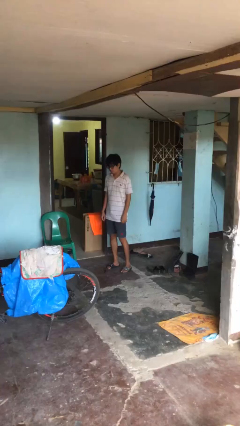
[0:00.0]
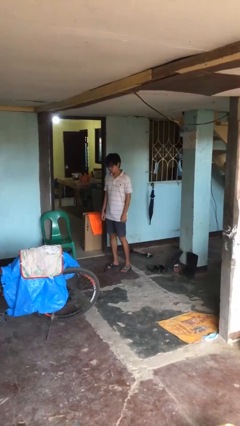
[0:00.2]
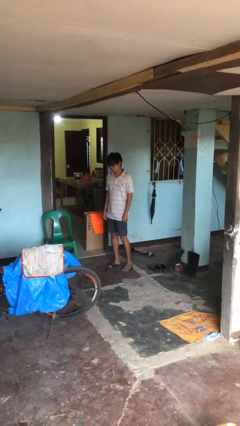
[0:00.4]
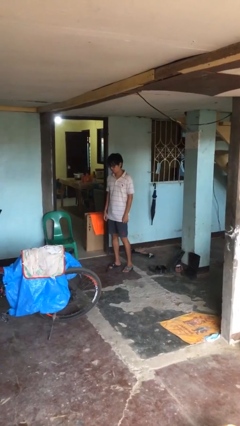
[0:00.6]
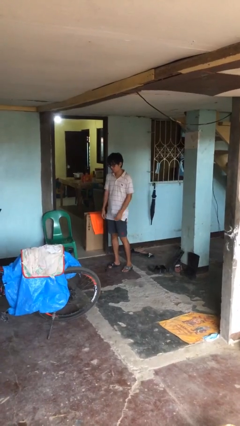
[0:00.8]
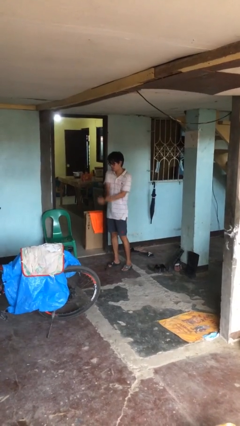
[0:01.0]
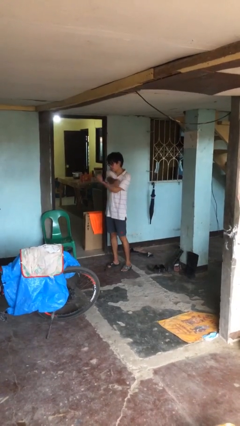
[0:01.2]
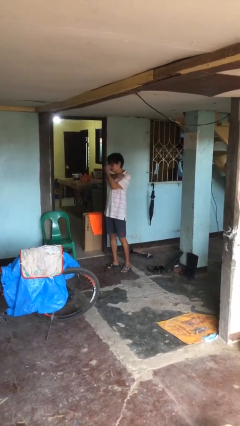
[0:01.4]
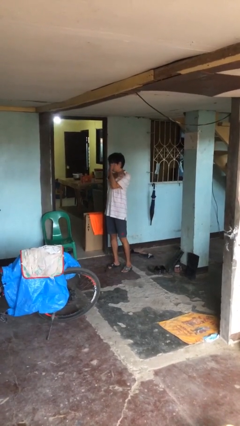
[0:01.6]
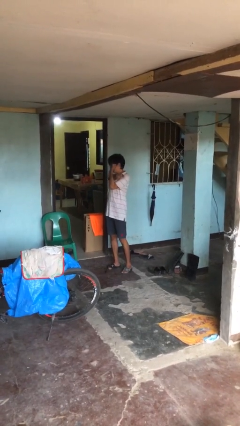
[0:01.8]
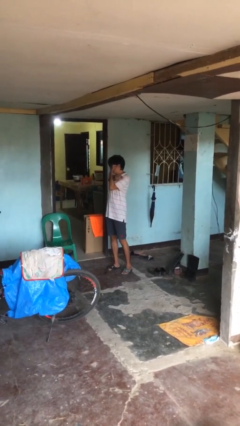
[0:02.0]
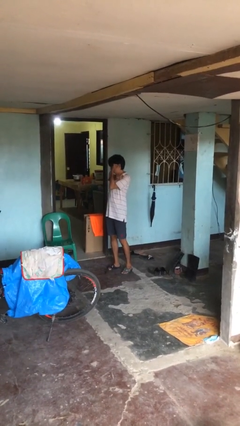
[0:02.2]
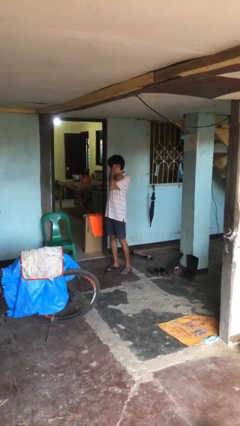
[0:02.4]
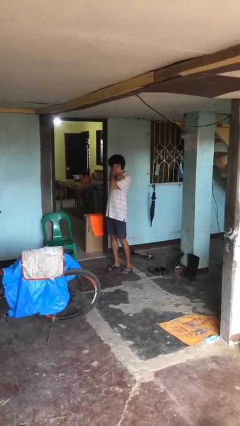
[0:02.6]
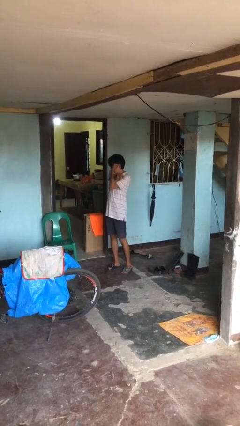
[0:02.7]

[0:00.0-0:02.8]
person crosses arms

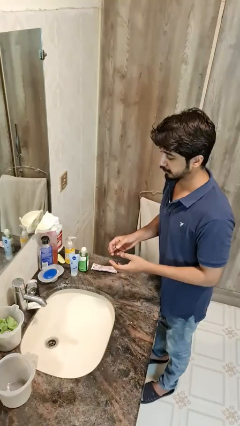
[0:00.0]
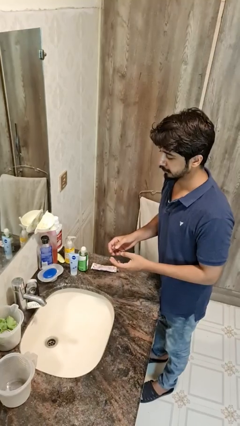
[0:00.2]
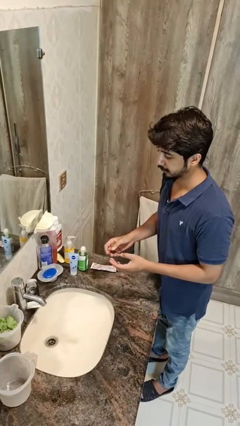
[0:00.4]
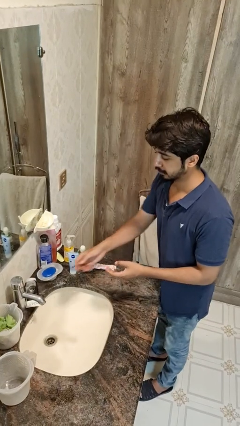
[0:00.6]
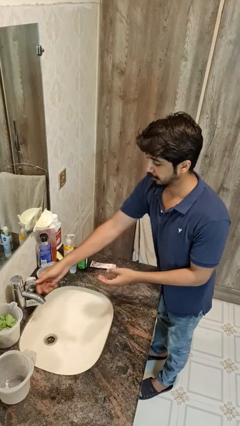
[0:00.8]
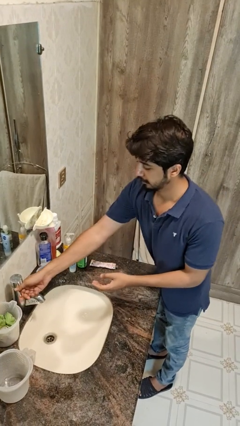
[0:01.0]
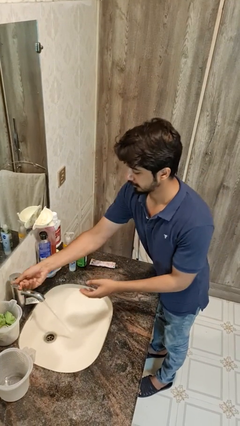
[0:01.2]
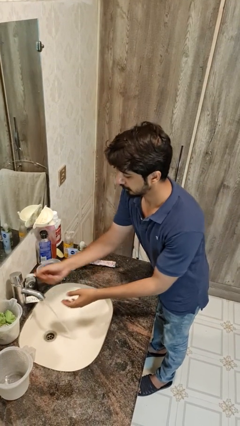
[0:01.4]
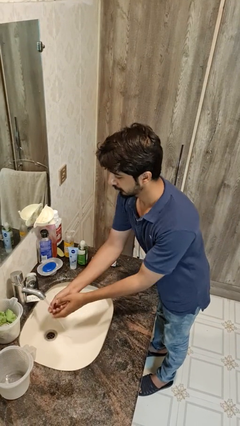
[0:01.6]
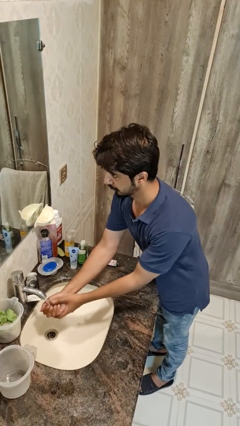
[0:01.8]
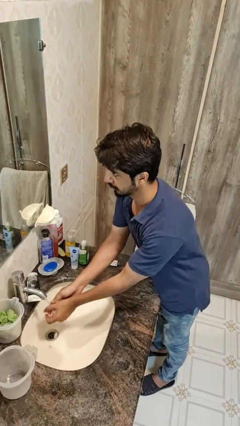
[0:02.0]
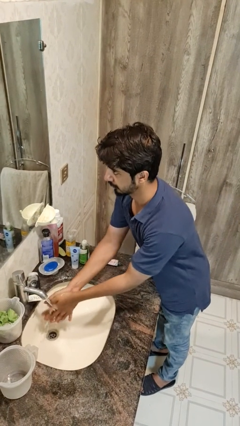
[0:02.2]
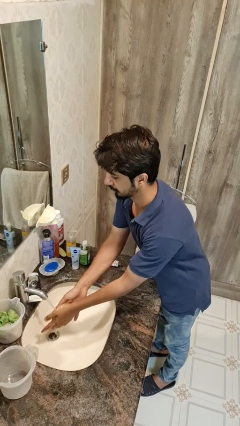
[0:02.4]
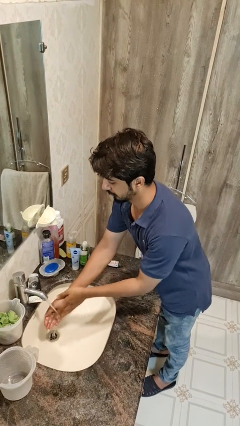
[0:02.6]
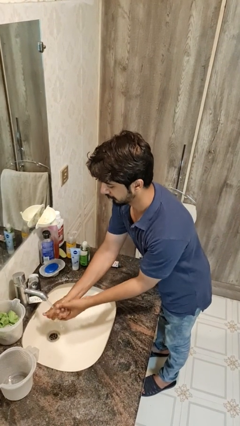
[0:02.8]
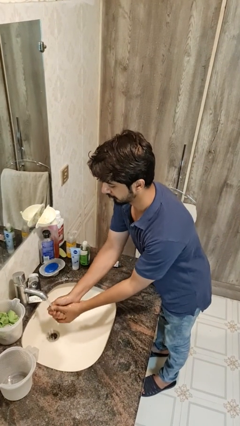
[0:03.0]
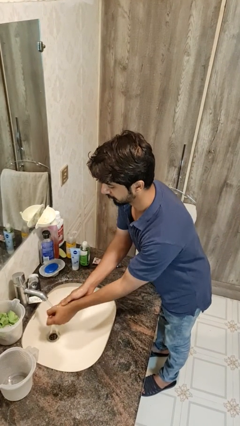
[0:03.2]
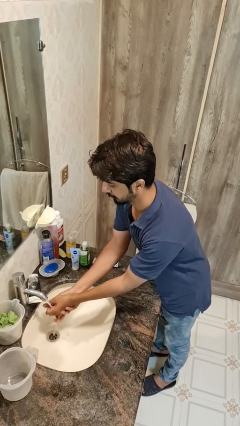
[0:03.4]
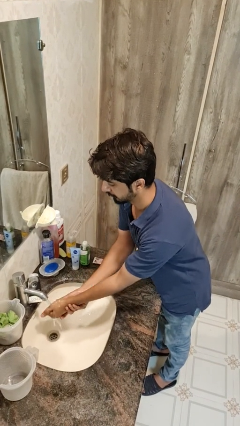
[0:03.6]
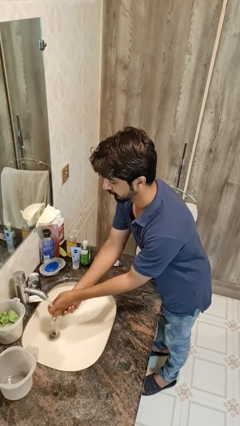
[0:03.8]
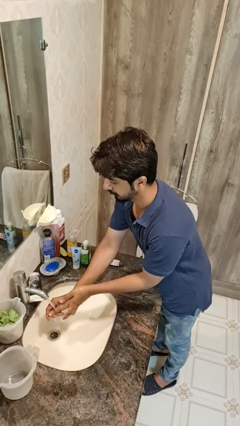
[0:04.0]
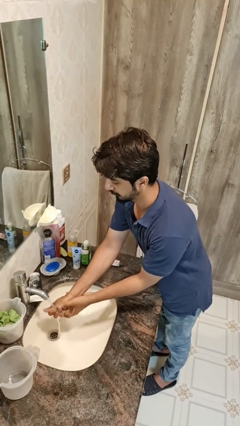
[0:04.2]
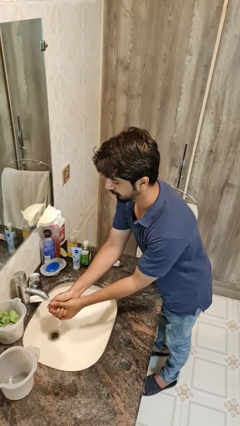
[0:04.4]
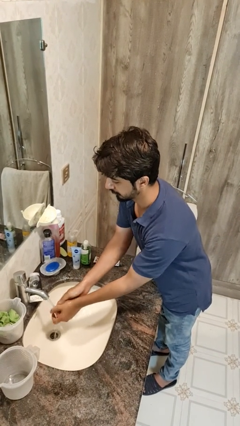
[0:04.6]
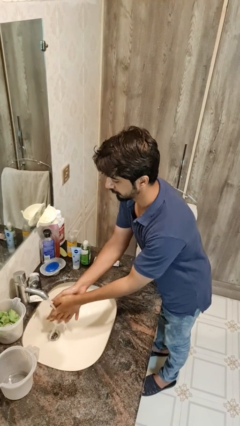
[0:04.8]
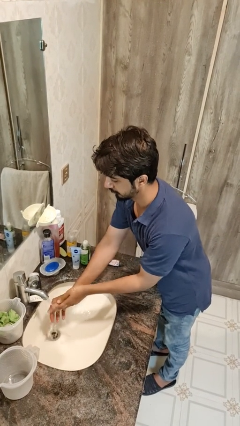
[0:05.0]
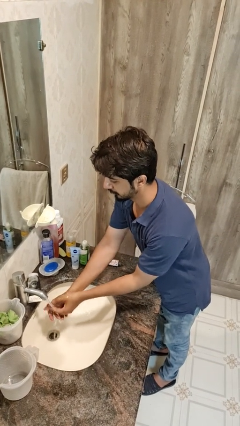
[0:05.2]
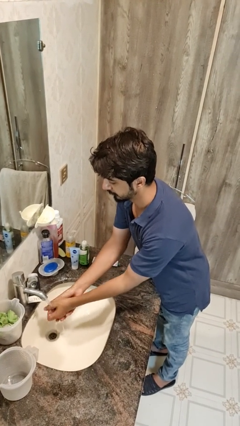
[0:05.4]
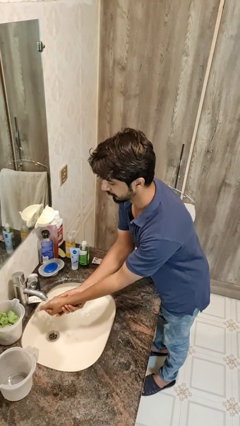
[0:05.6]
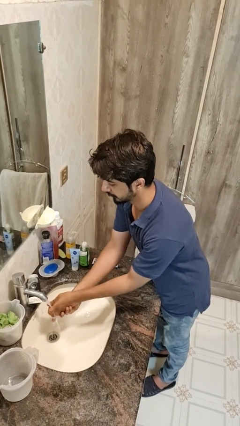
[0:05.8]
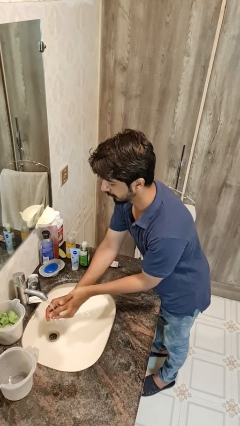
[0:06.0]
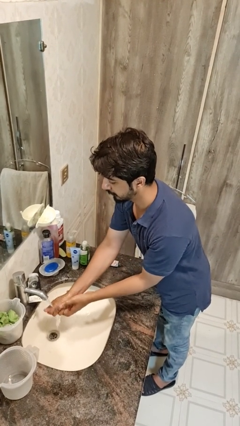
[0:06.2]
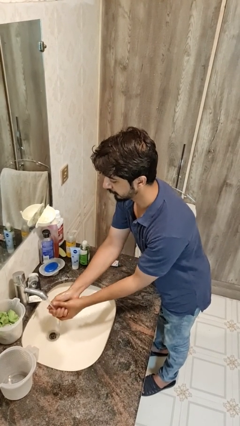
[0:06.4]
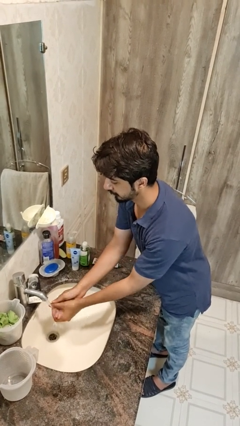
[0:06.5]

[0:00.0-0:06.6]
person washes hands

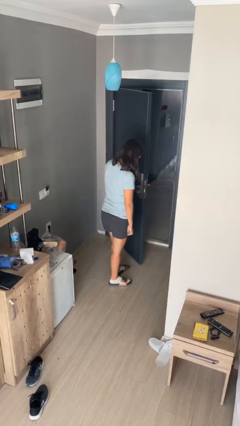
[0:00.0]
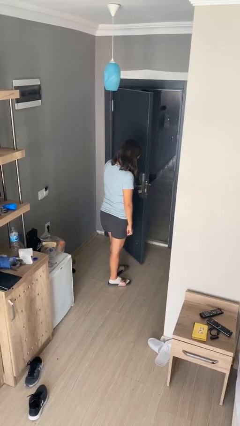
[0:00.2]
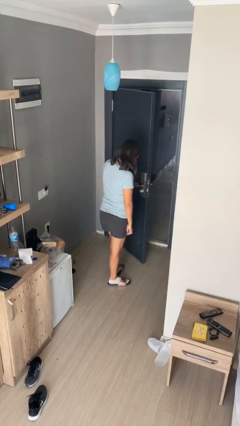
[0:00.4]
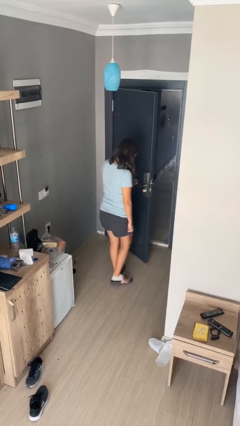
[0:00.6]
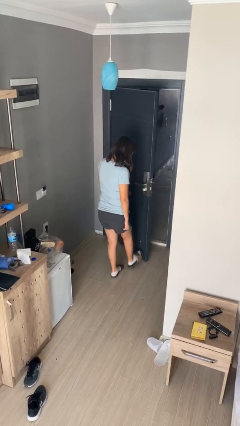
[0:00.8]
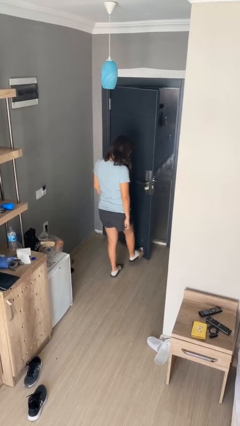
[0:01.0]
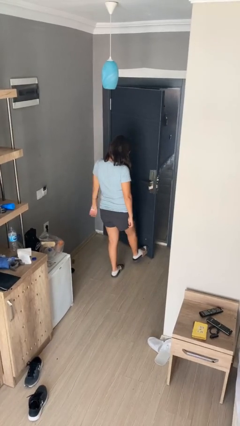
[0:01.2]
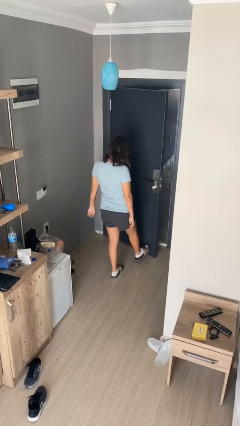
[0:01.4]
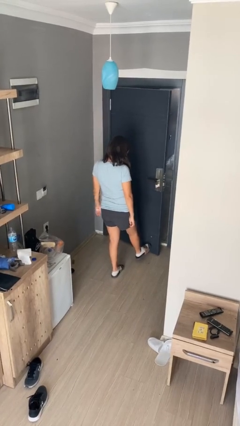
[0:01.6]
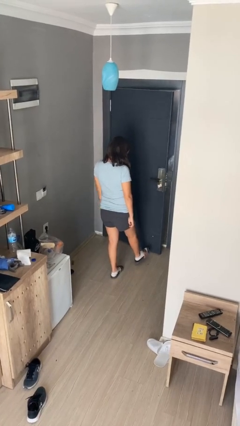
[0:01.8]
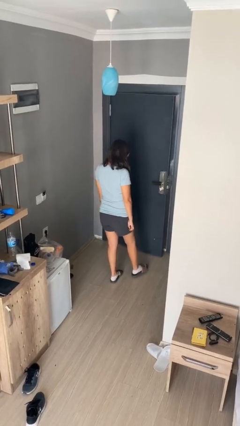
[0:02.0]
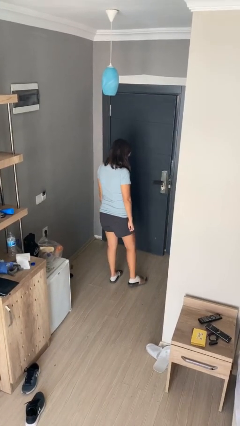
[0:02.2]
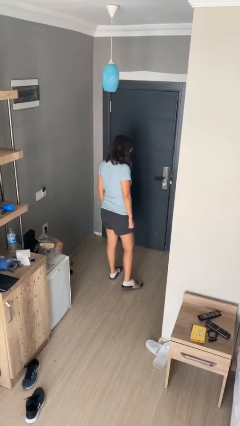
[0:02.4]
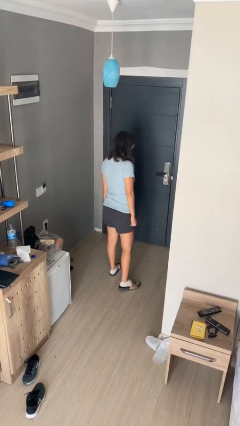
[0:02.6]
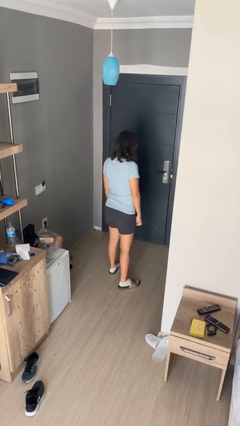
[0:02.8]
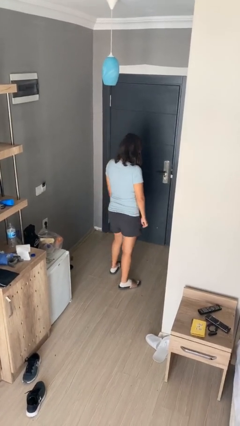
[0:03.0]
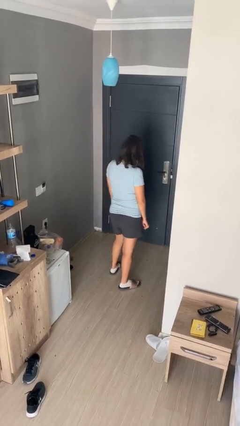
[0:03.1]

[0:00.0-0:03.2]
person closes door with foot

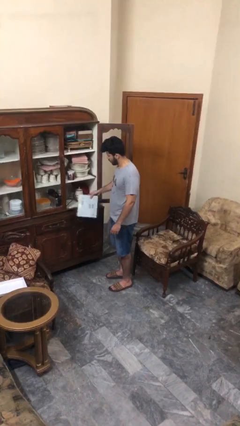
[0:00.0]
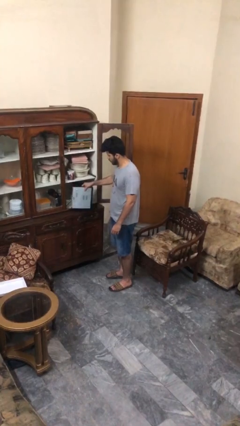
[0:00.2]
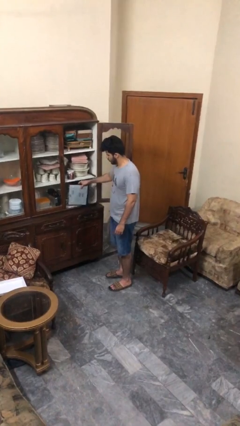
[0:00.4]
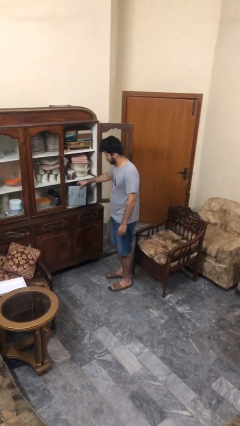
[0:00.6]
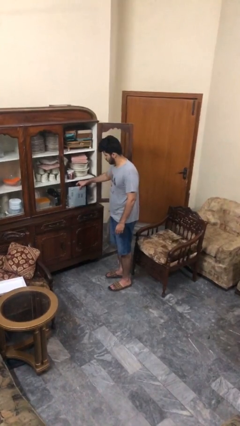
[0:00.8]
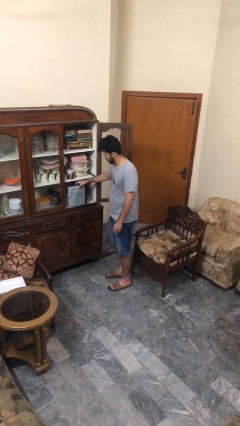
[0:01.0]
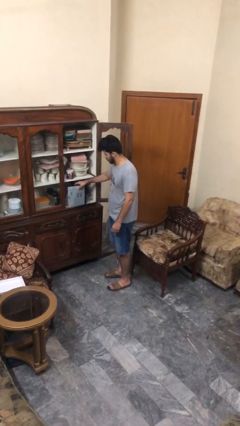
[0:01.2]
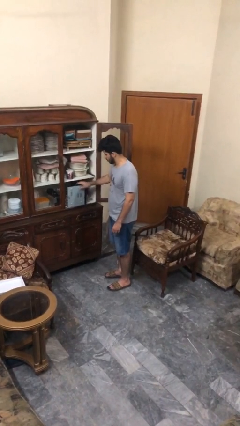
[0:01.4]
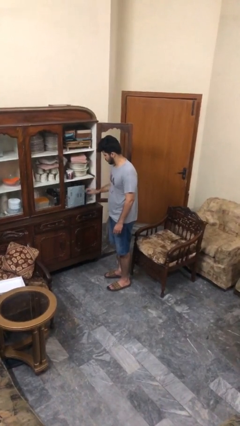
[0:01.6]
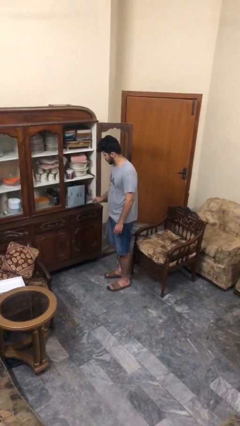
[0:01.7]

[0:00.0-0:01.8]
person puts down object into cabinet

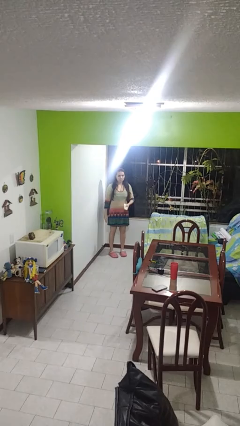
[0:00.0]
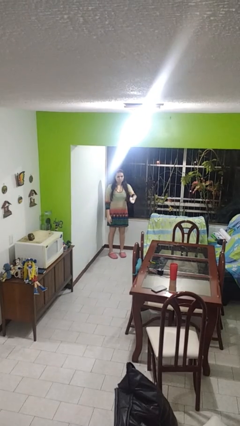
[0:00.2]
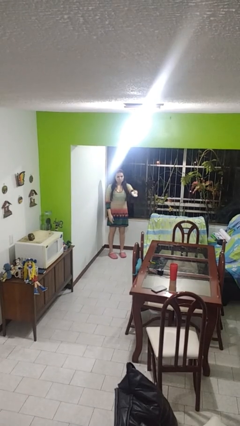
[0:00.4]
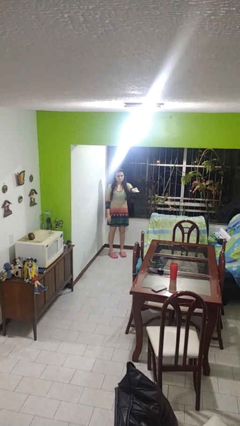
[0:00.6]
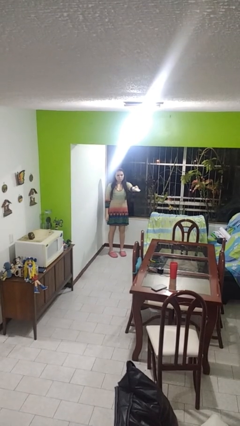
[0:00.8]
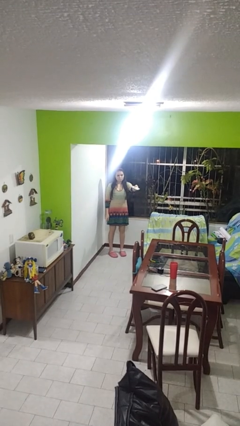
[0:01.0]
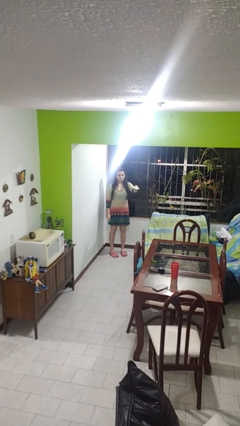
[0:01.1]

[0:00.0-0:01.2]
person uses television remote

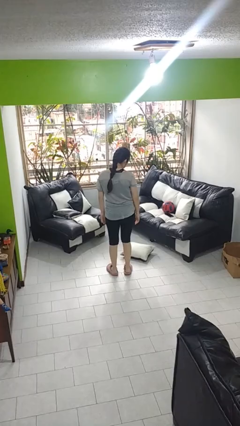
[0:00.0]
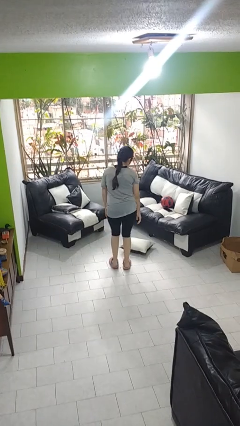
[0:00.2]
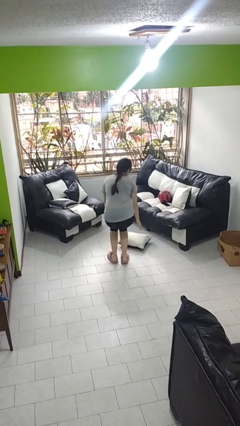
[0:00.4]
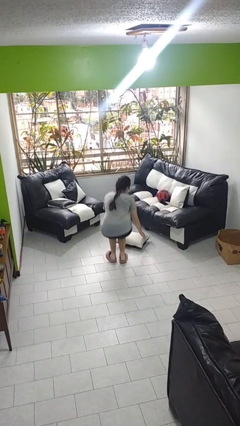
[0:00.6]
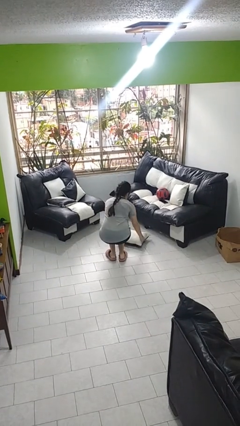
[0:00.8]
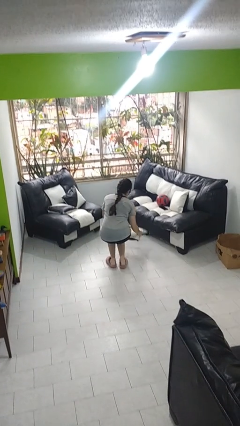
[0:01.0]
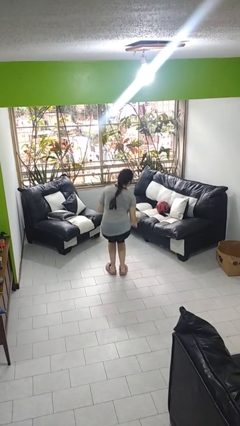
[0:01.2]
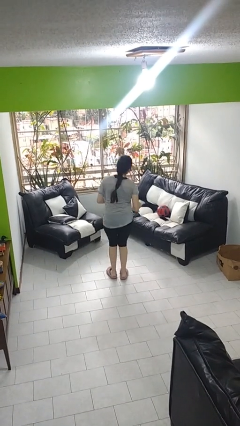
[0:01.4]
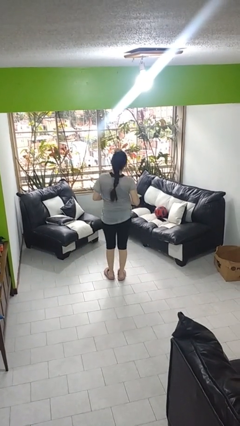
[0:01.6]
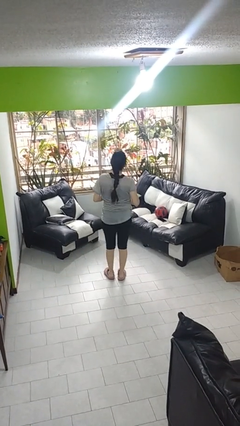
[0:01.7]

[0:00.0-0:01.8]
person picks up object from floor

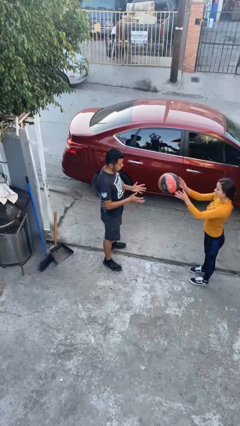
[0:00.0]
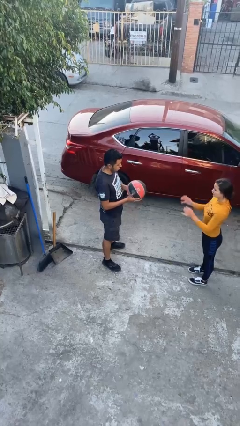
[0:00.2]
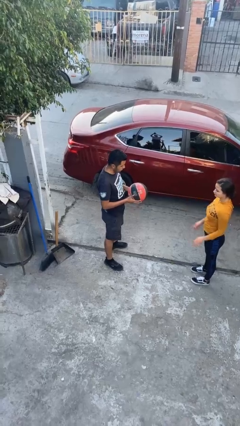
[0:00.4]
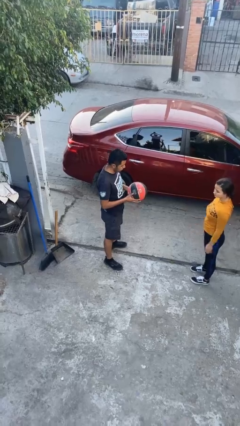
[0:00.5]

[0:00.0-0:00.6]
person catches object from person
